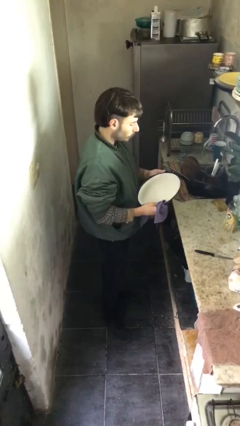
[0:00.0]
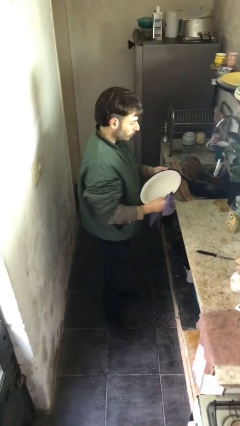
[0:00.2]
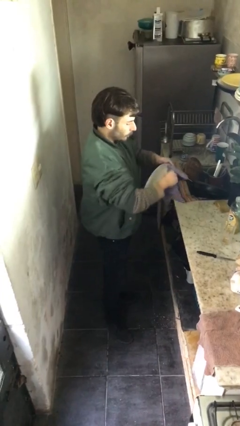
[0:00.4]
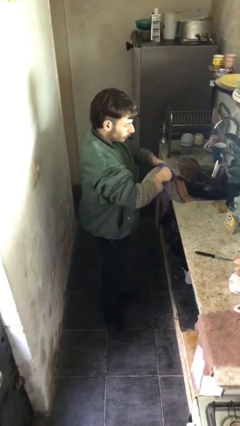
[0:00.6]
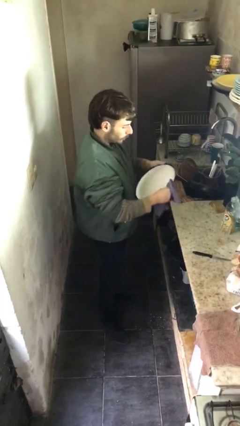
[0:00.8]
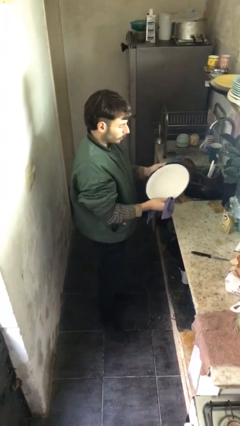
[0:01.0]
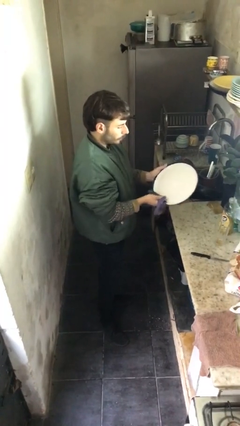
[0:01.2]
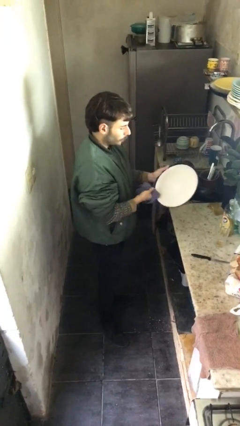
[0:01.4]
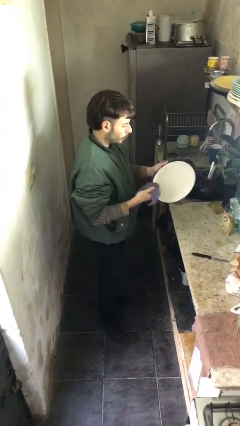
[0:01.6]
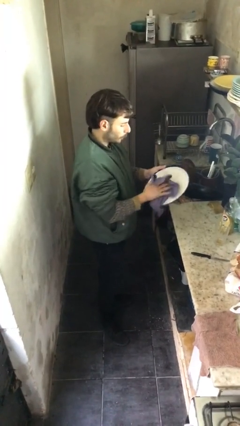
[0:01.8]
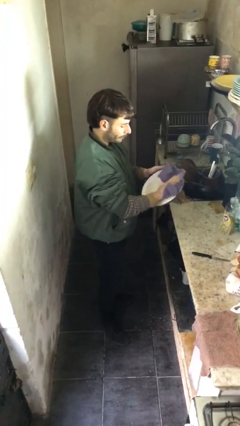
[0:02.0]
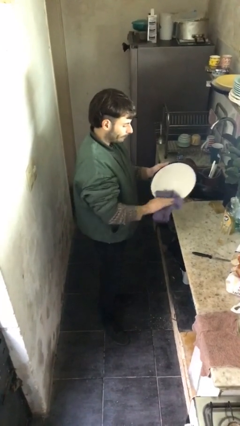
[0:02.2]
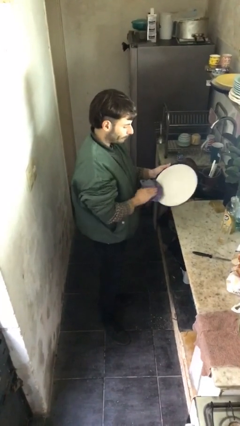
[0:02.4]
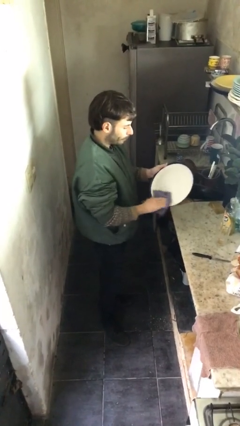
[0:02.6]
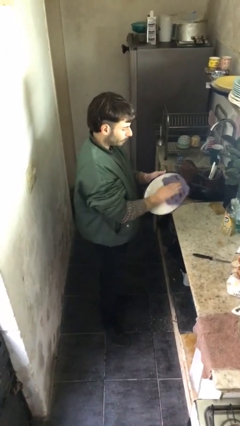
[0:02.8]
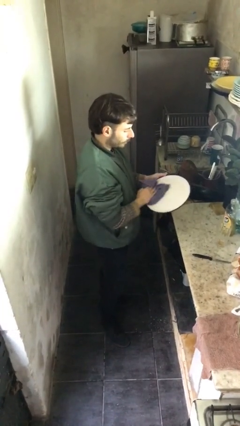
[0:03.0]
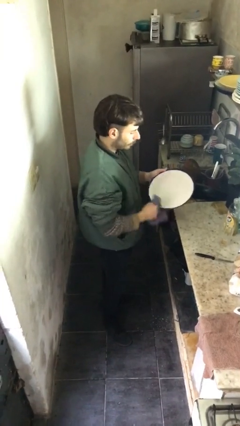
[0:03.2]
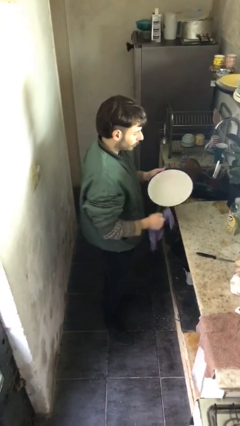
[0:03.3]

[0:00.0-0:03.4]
person dries dish

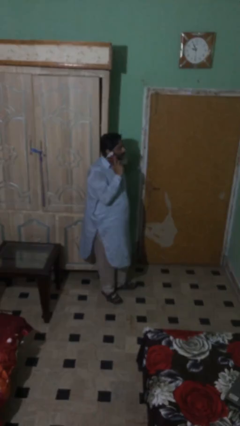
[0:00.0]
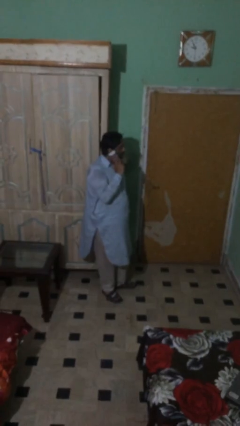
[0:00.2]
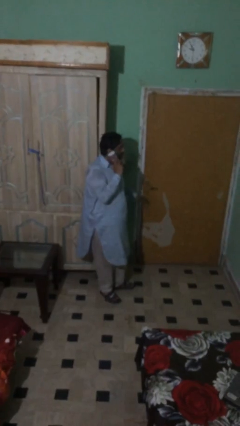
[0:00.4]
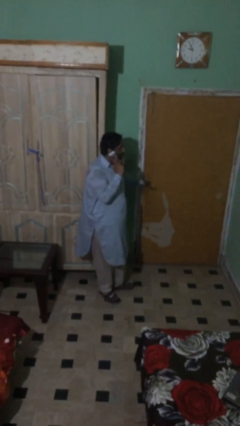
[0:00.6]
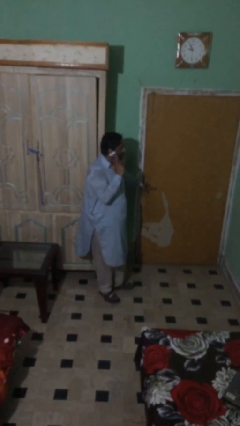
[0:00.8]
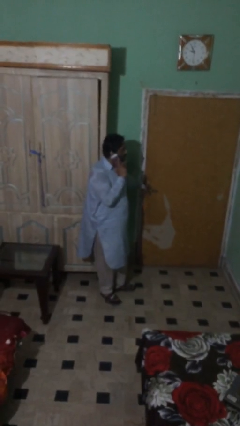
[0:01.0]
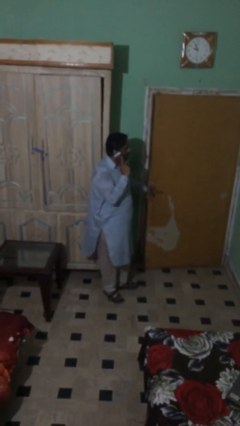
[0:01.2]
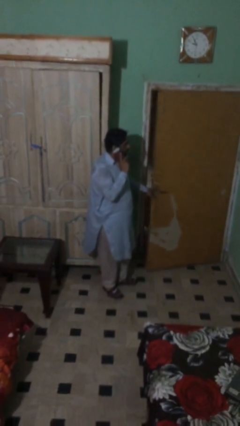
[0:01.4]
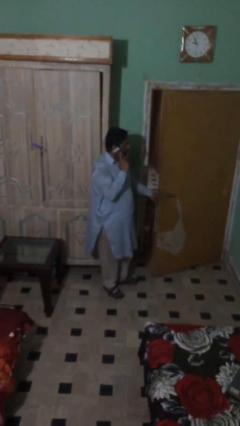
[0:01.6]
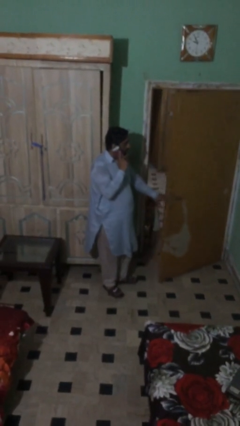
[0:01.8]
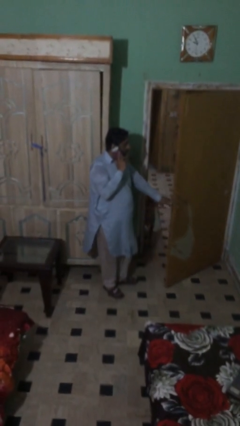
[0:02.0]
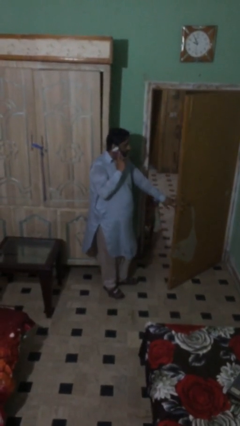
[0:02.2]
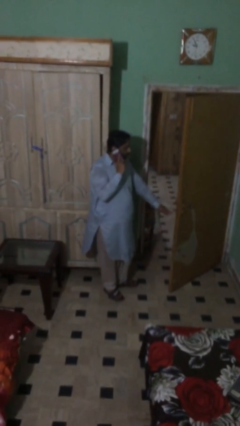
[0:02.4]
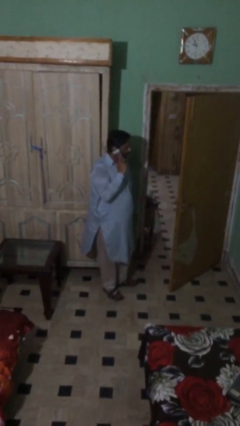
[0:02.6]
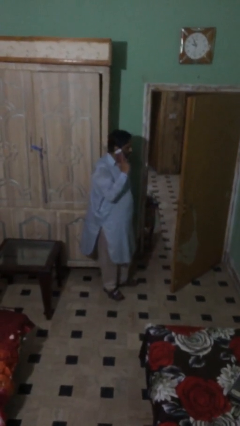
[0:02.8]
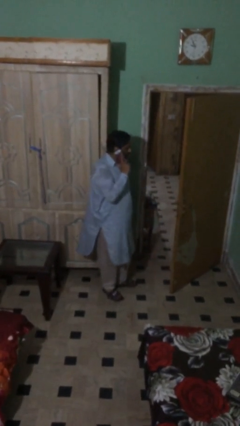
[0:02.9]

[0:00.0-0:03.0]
person opens facility door

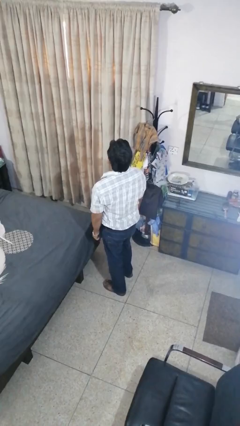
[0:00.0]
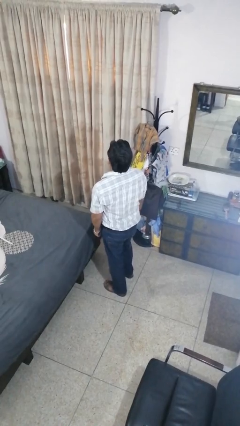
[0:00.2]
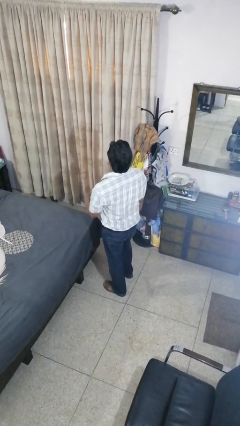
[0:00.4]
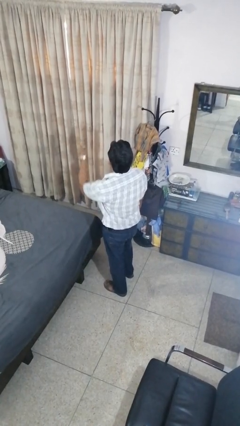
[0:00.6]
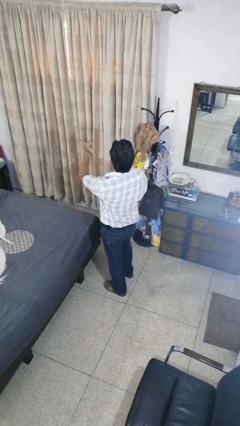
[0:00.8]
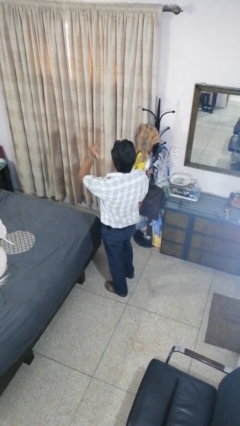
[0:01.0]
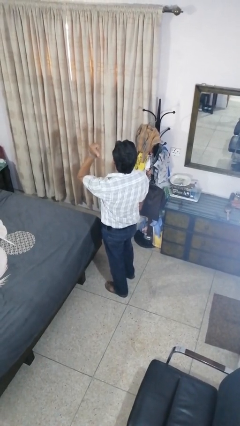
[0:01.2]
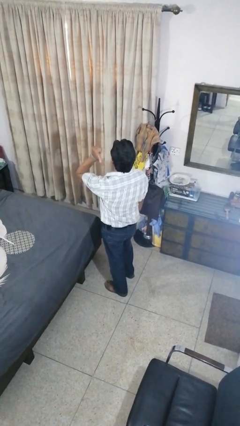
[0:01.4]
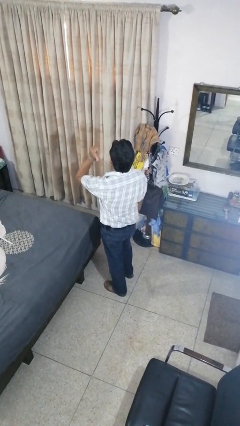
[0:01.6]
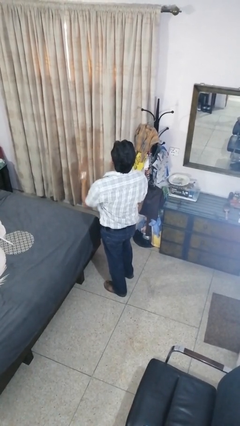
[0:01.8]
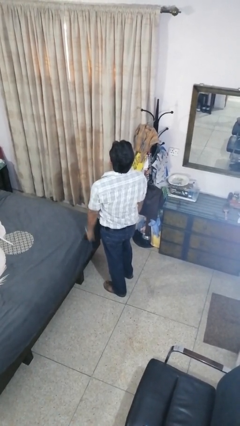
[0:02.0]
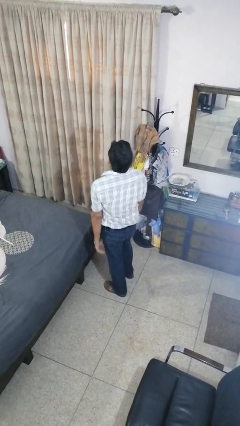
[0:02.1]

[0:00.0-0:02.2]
person gestures behind me

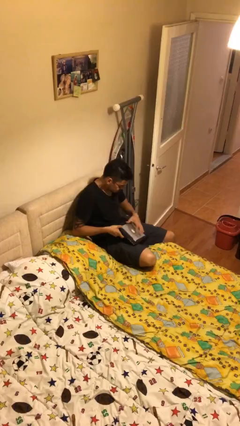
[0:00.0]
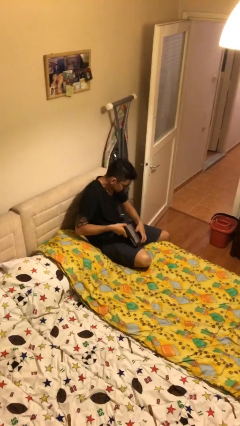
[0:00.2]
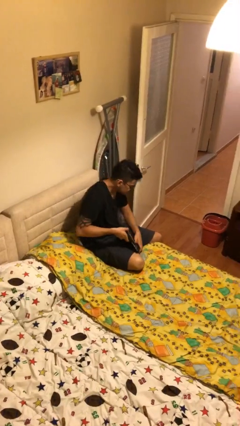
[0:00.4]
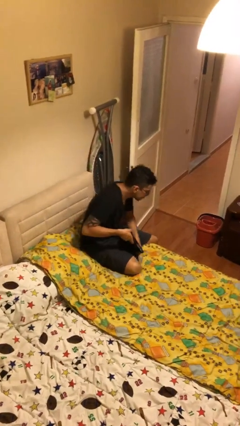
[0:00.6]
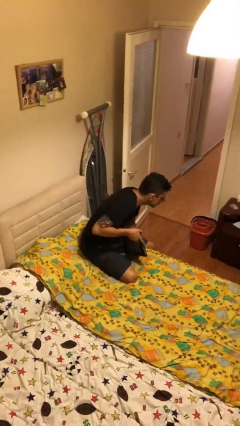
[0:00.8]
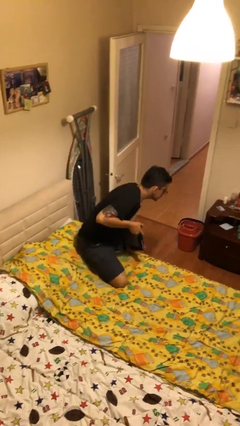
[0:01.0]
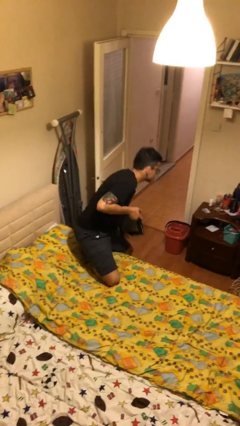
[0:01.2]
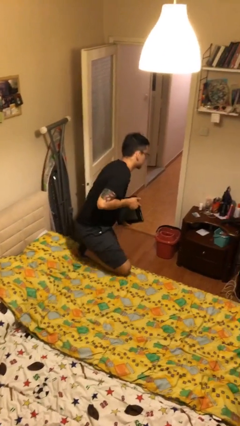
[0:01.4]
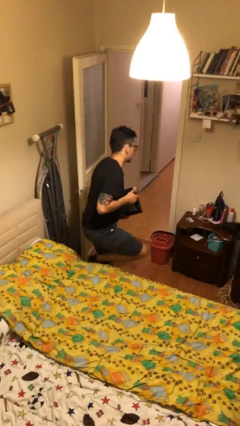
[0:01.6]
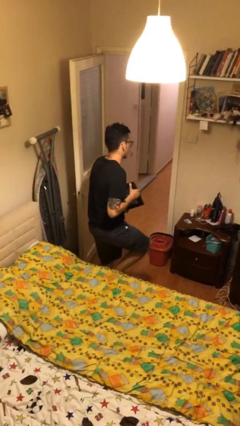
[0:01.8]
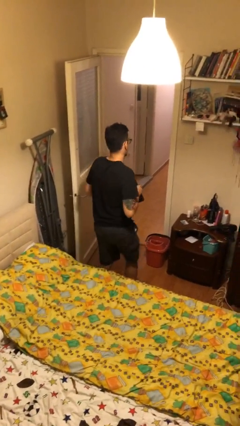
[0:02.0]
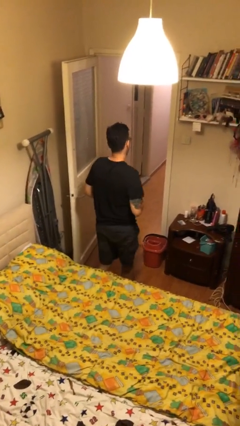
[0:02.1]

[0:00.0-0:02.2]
person stands up

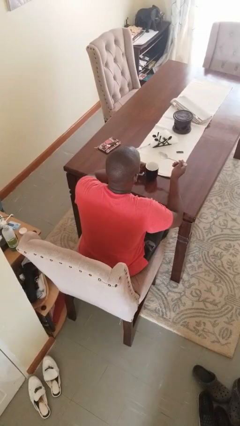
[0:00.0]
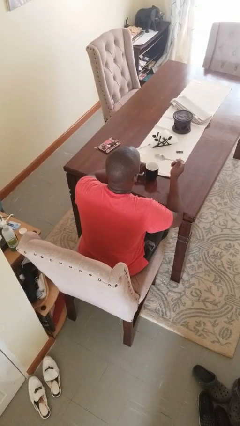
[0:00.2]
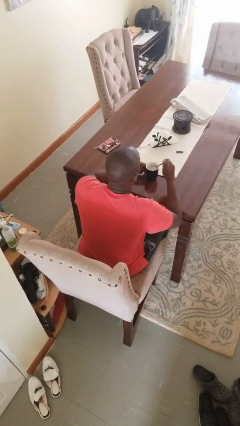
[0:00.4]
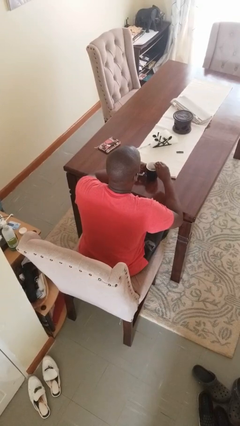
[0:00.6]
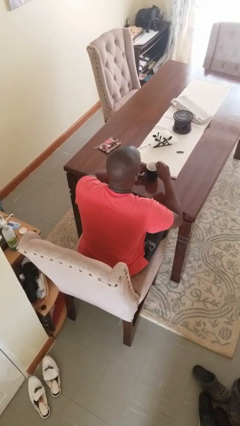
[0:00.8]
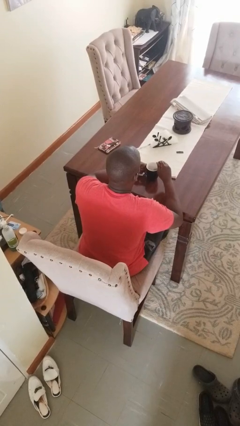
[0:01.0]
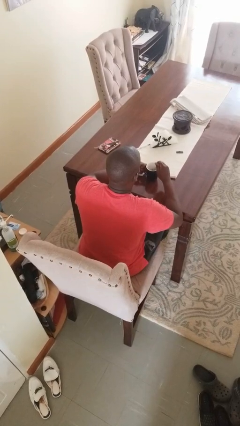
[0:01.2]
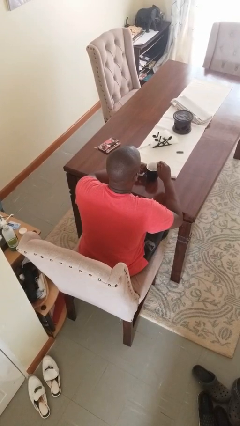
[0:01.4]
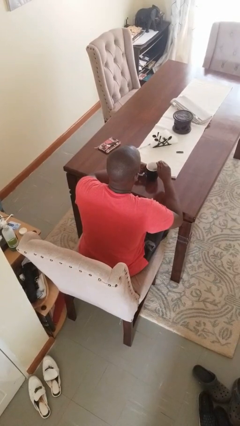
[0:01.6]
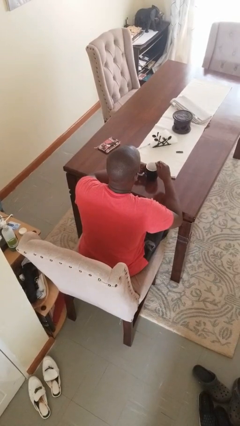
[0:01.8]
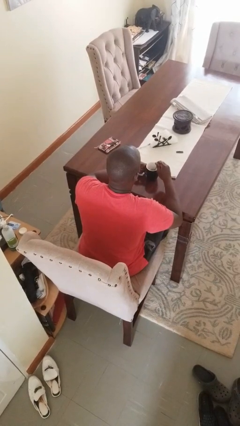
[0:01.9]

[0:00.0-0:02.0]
person stirs mug

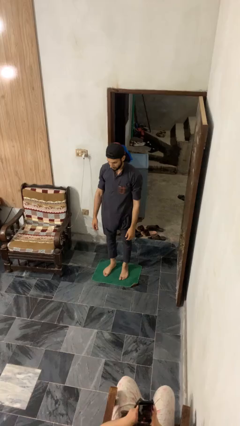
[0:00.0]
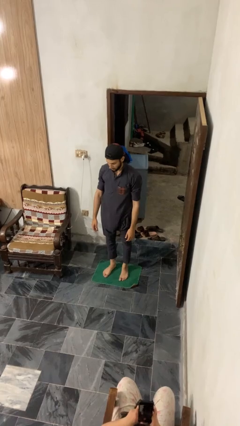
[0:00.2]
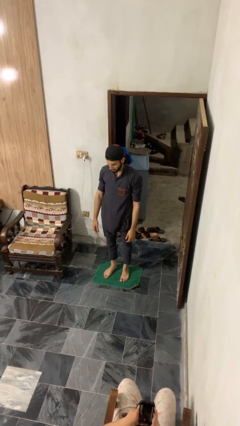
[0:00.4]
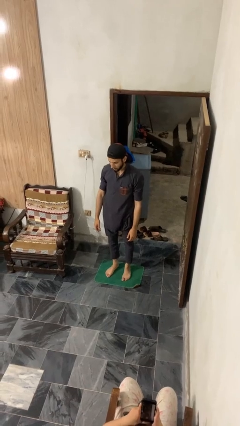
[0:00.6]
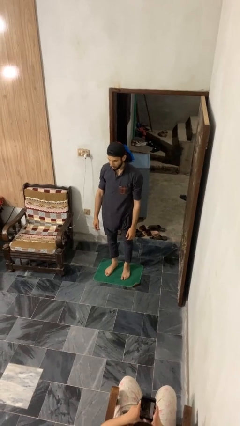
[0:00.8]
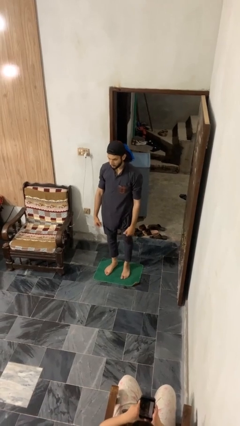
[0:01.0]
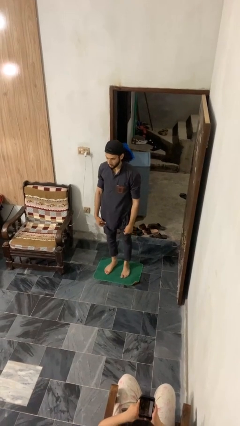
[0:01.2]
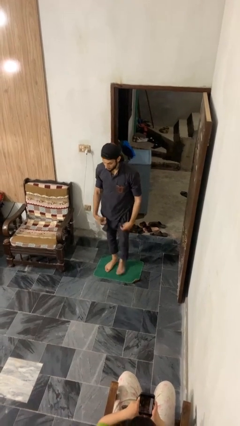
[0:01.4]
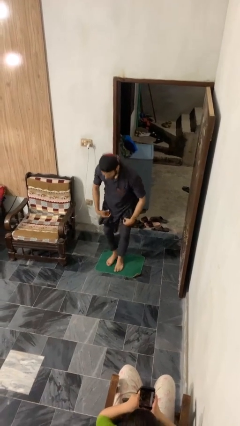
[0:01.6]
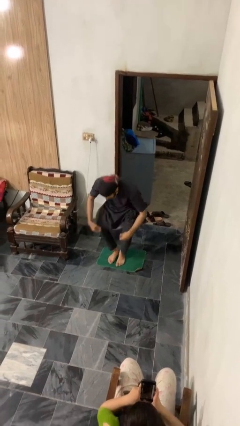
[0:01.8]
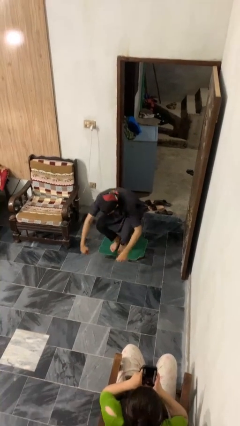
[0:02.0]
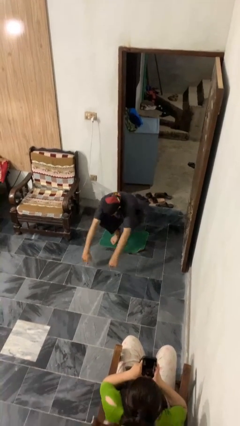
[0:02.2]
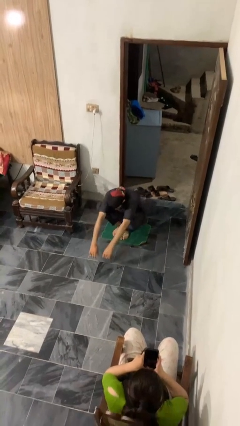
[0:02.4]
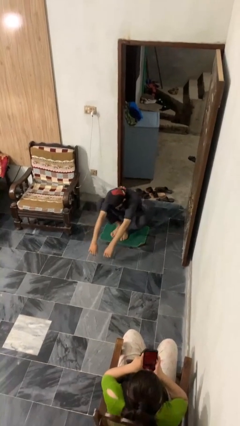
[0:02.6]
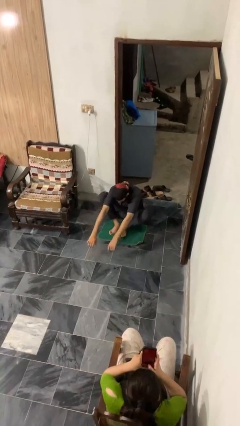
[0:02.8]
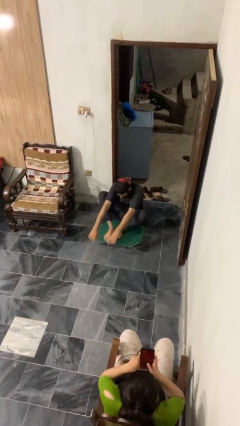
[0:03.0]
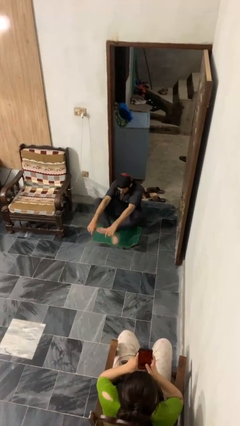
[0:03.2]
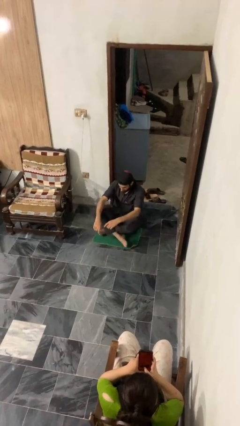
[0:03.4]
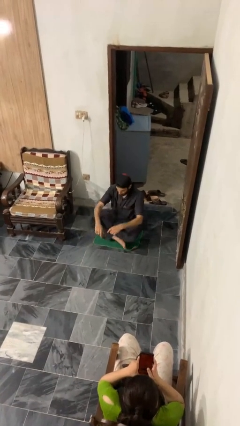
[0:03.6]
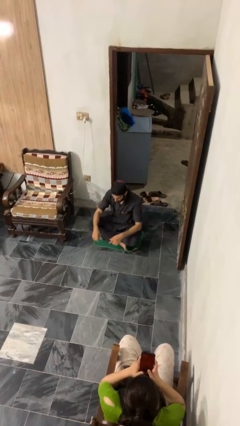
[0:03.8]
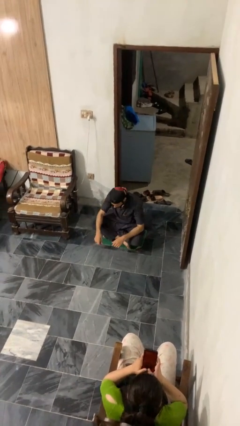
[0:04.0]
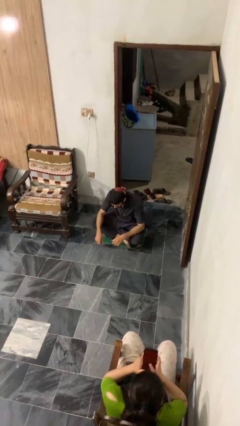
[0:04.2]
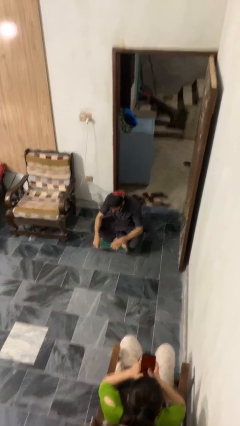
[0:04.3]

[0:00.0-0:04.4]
person sits crisscross

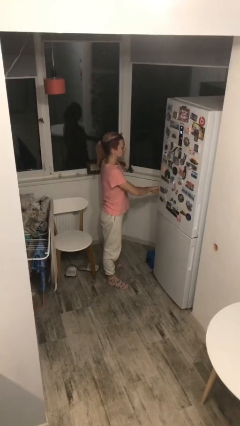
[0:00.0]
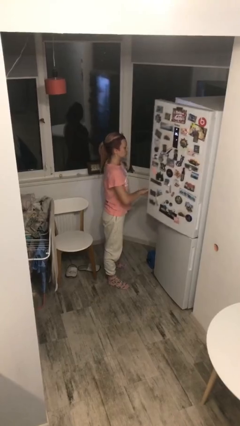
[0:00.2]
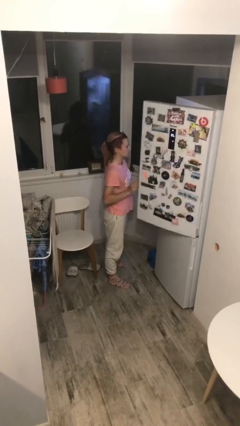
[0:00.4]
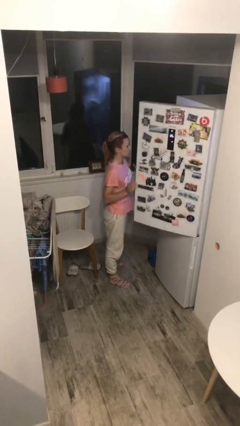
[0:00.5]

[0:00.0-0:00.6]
person opens refrigerator
